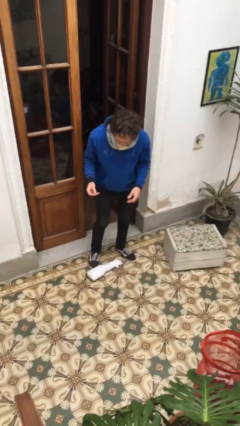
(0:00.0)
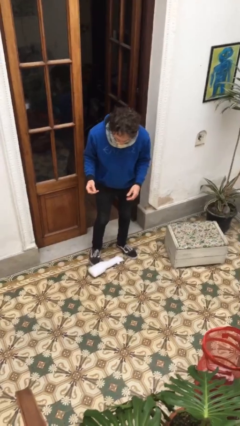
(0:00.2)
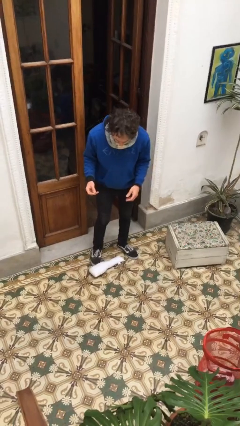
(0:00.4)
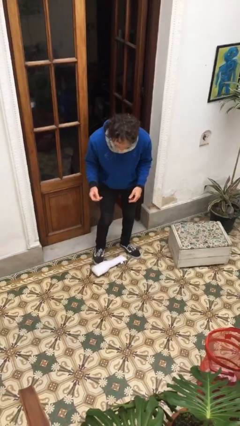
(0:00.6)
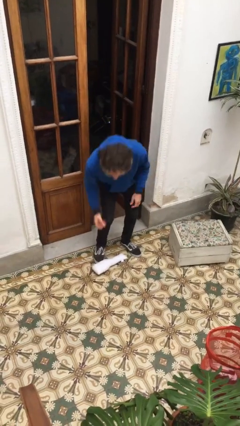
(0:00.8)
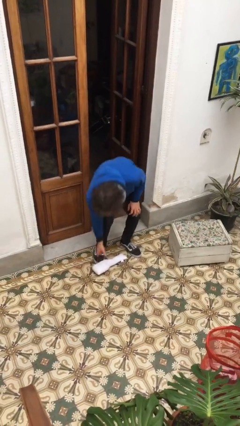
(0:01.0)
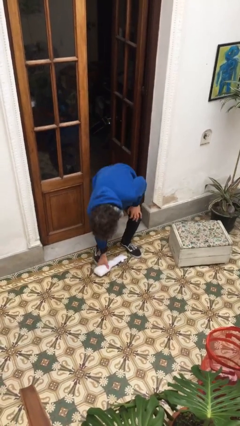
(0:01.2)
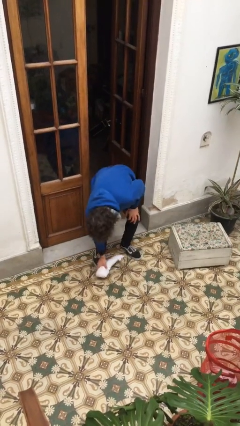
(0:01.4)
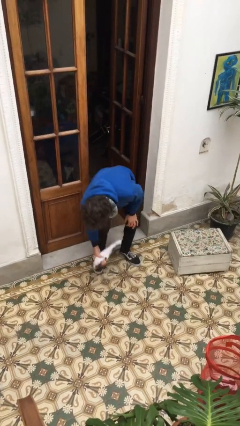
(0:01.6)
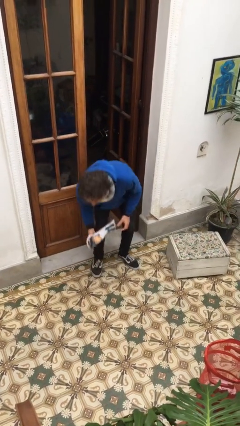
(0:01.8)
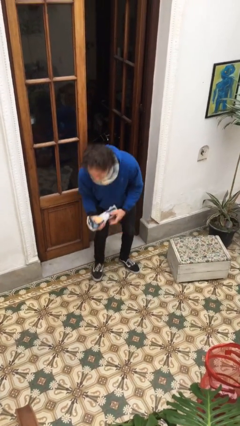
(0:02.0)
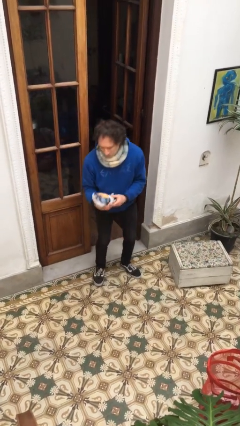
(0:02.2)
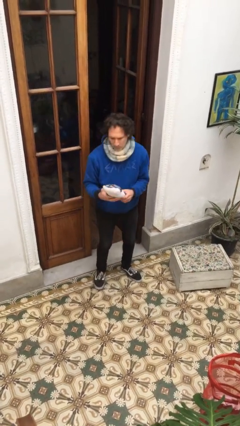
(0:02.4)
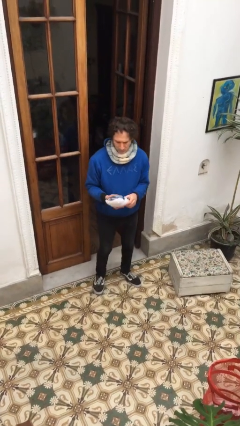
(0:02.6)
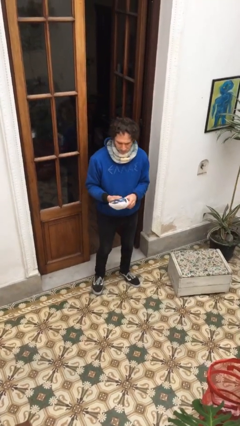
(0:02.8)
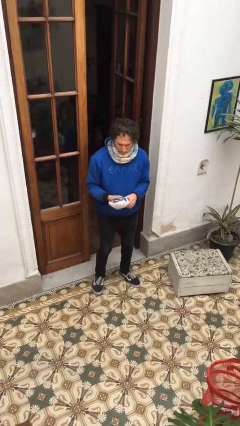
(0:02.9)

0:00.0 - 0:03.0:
person picks up object from floor

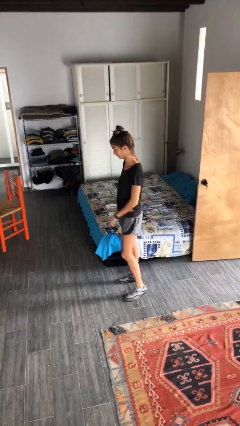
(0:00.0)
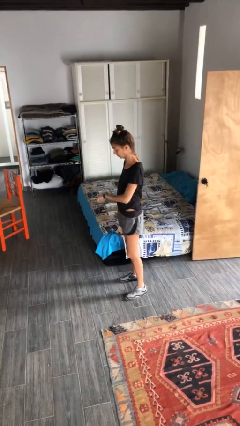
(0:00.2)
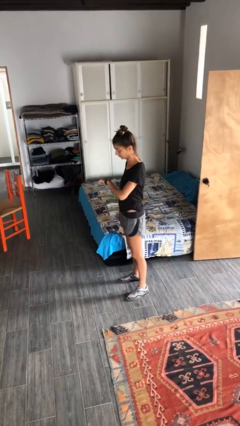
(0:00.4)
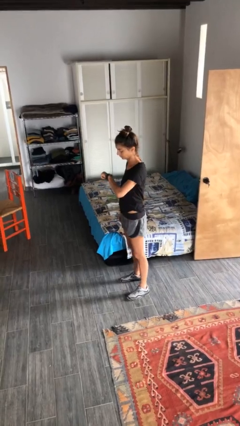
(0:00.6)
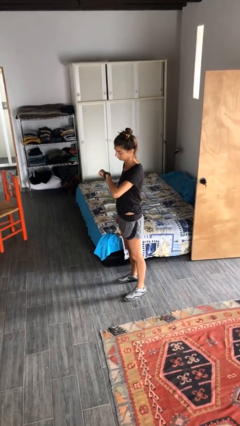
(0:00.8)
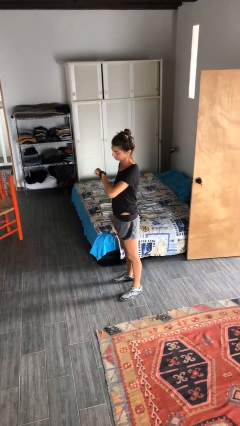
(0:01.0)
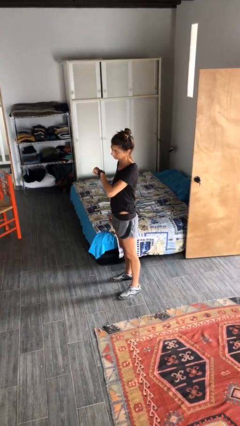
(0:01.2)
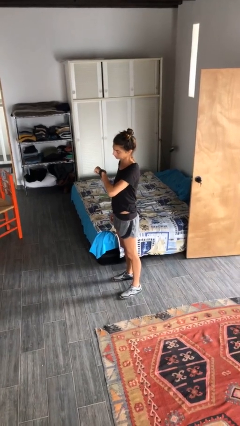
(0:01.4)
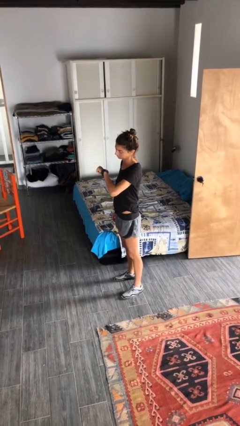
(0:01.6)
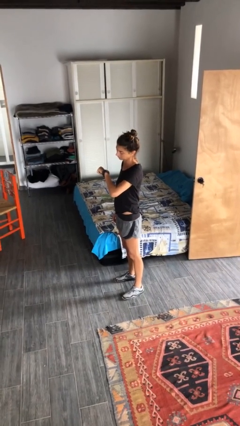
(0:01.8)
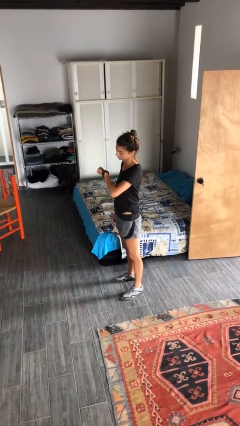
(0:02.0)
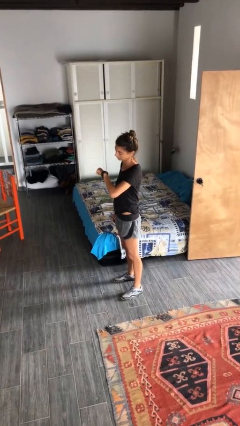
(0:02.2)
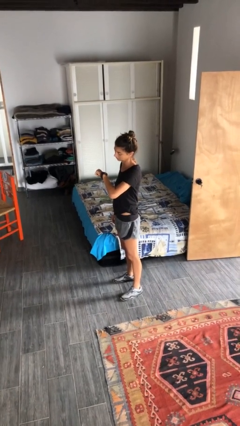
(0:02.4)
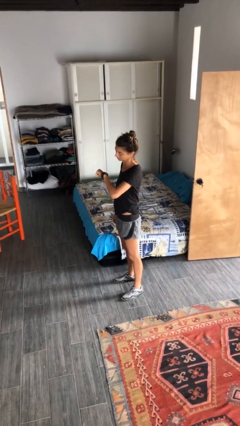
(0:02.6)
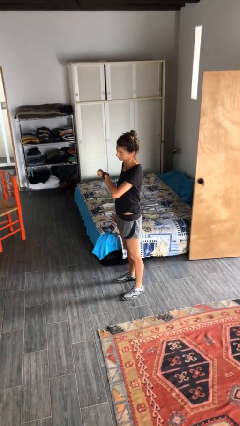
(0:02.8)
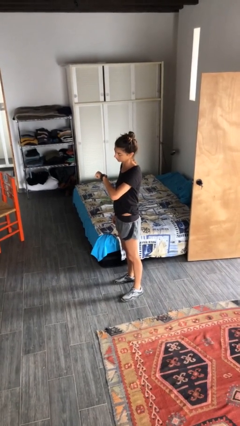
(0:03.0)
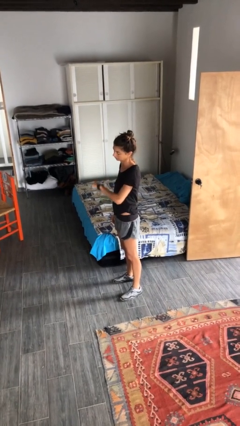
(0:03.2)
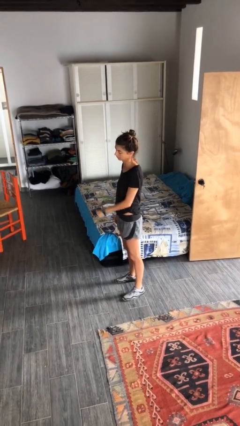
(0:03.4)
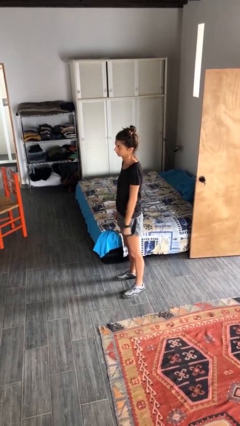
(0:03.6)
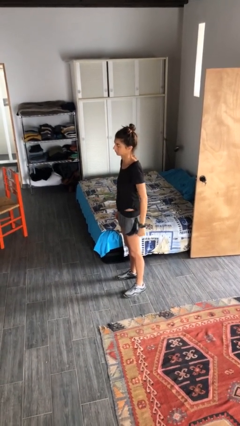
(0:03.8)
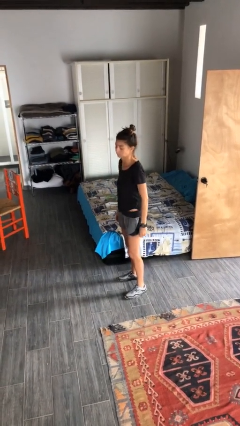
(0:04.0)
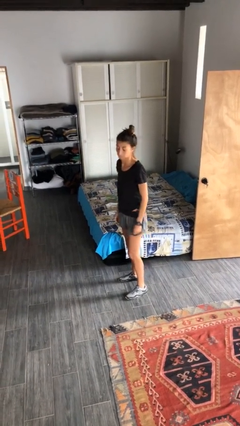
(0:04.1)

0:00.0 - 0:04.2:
person looks at wristwatch

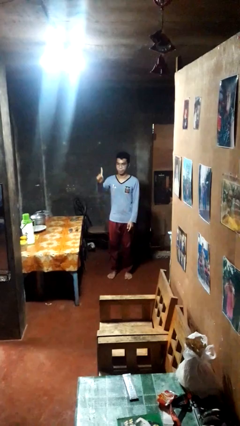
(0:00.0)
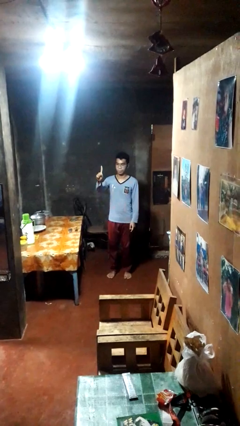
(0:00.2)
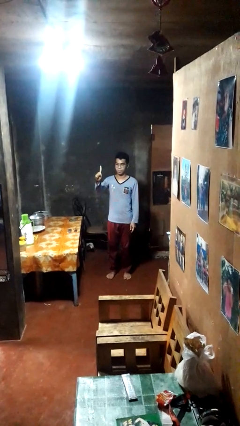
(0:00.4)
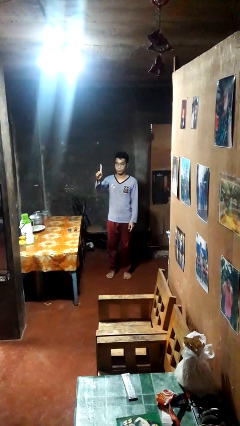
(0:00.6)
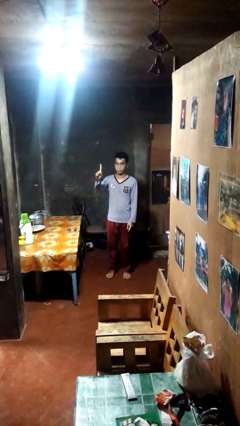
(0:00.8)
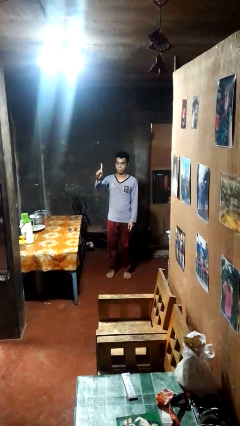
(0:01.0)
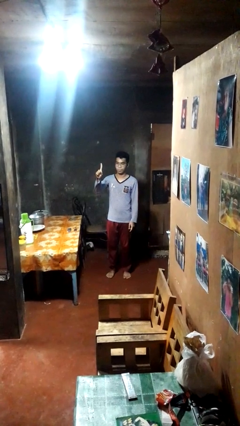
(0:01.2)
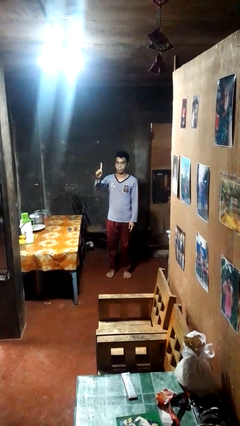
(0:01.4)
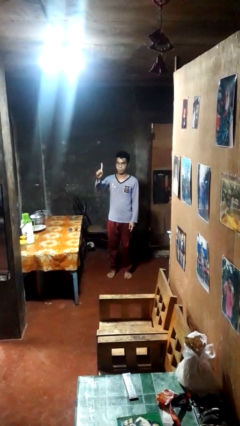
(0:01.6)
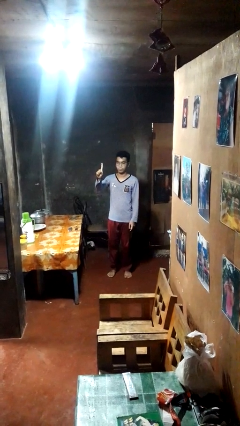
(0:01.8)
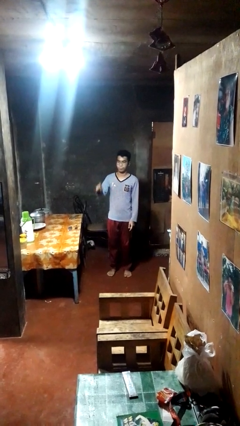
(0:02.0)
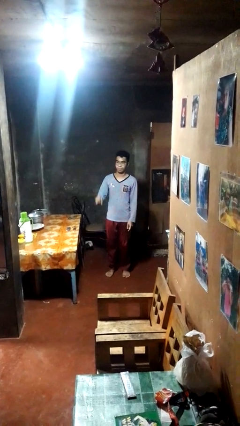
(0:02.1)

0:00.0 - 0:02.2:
person gestures number one

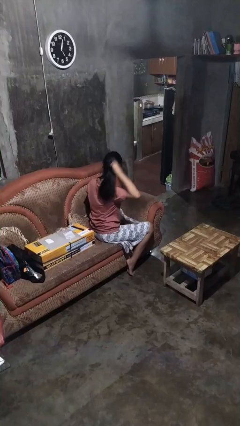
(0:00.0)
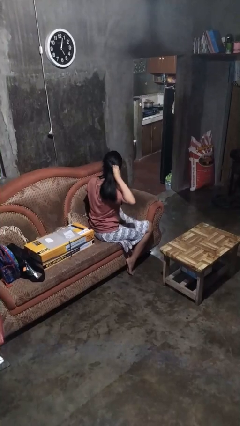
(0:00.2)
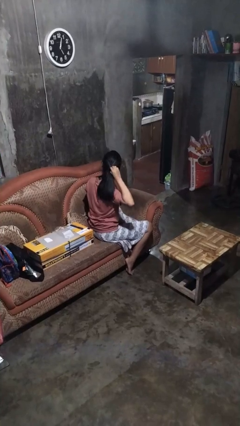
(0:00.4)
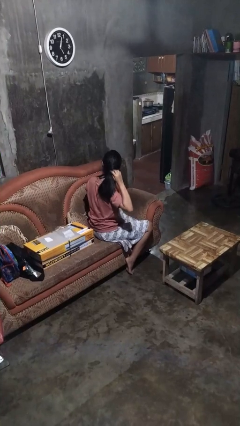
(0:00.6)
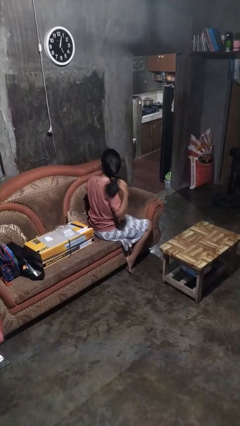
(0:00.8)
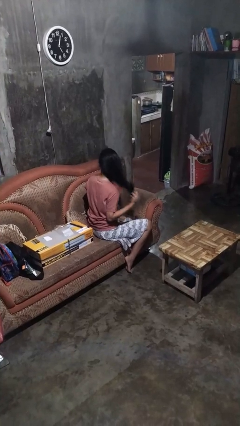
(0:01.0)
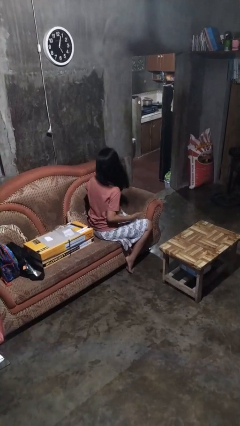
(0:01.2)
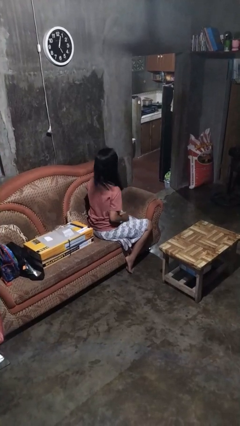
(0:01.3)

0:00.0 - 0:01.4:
person takes off hairtie

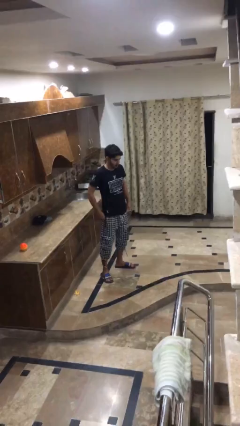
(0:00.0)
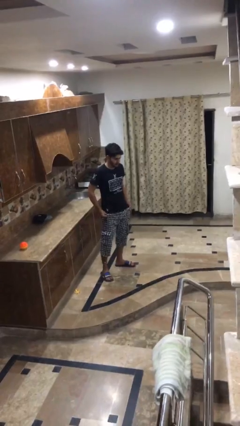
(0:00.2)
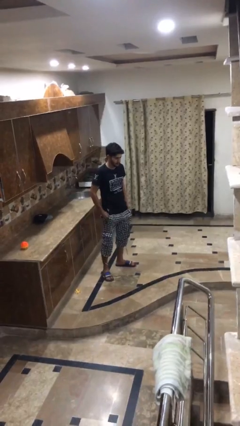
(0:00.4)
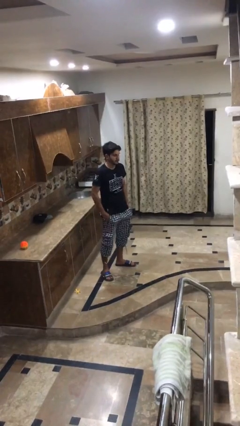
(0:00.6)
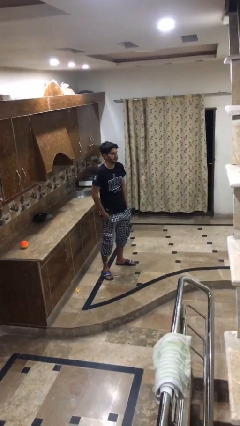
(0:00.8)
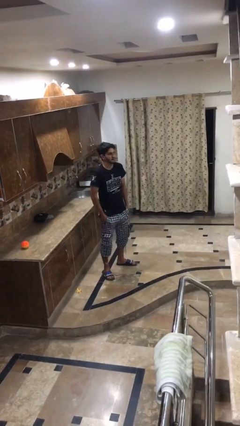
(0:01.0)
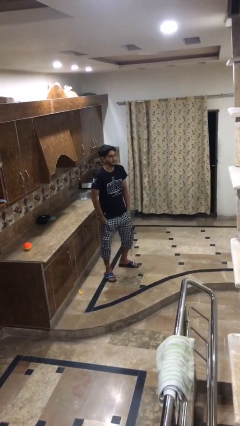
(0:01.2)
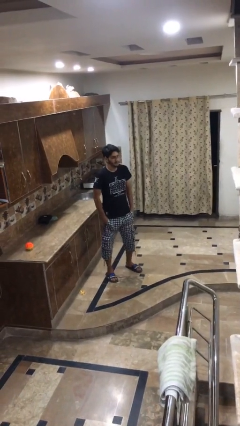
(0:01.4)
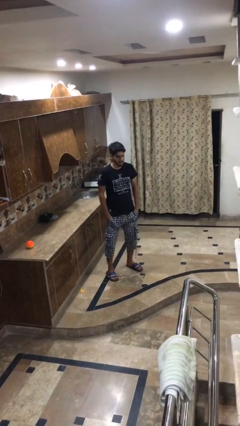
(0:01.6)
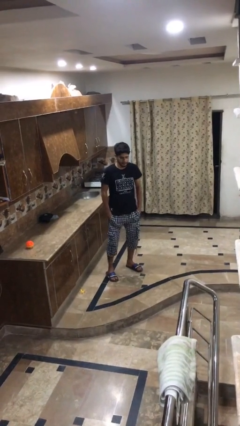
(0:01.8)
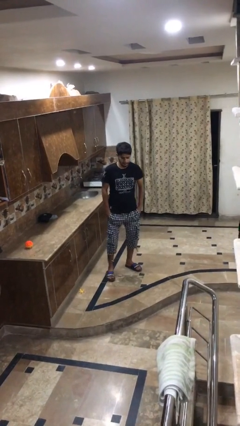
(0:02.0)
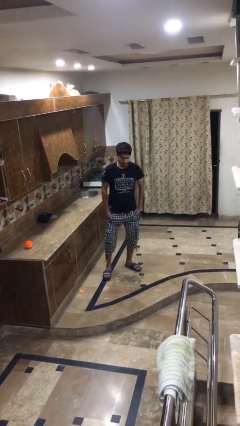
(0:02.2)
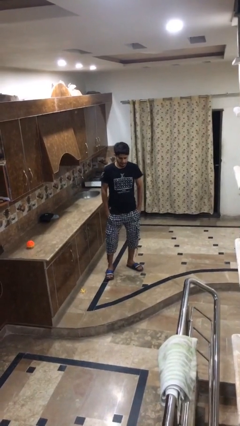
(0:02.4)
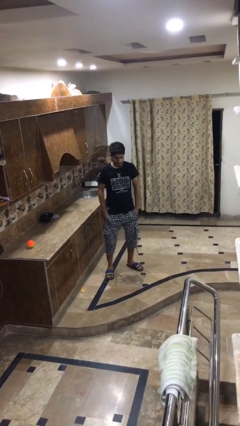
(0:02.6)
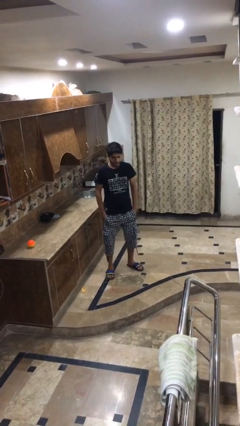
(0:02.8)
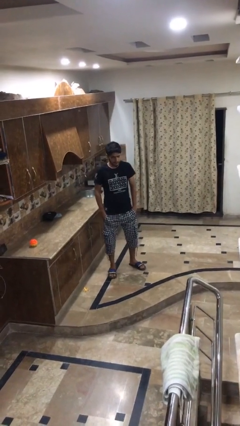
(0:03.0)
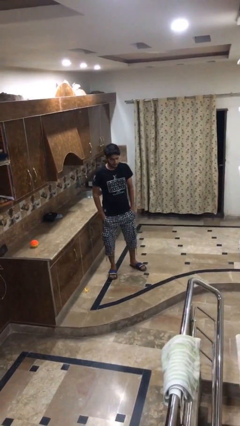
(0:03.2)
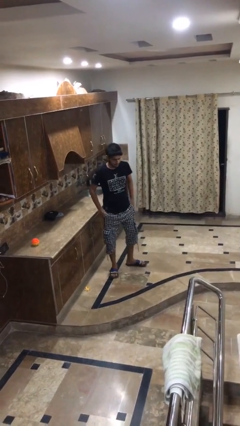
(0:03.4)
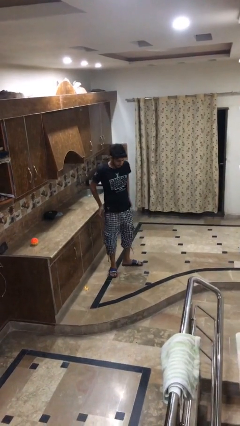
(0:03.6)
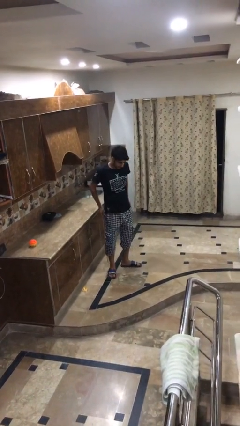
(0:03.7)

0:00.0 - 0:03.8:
person puts hands in back pockets

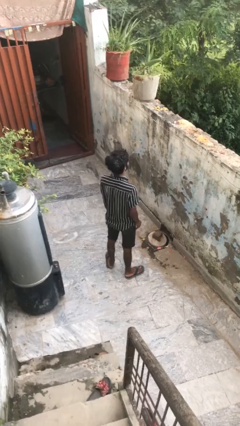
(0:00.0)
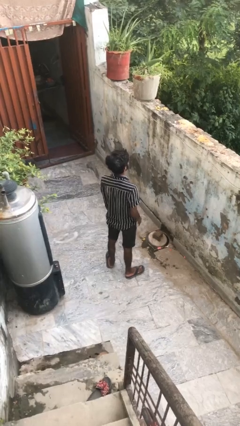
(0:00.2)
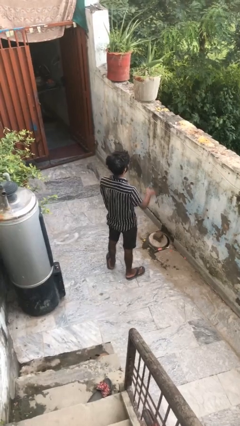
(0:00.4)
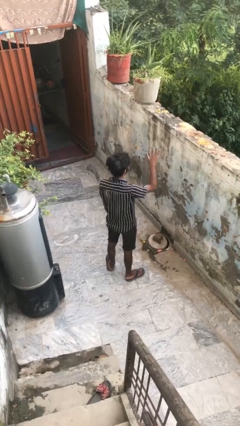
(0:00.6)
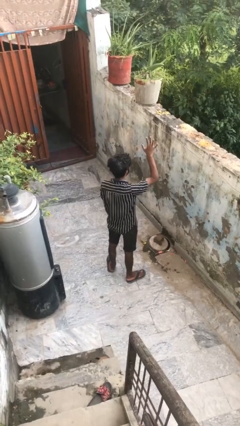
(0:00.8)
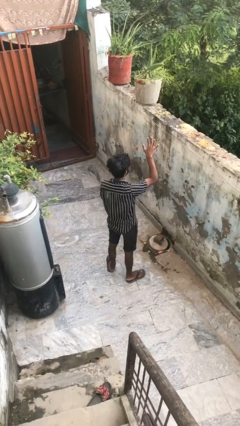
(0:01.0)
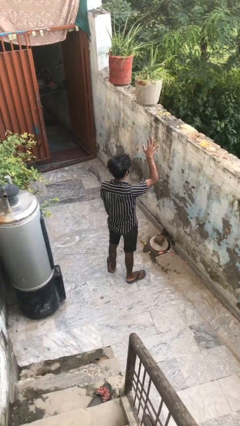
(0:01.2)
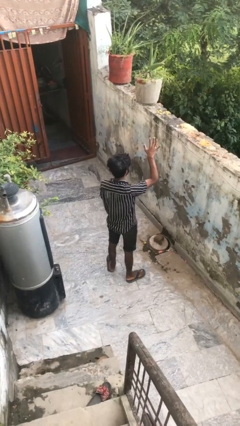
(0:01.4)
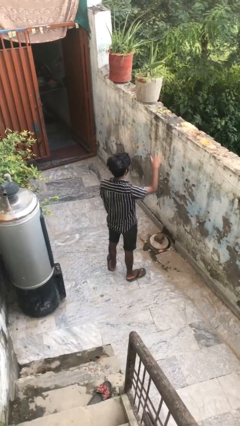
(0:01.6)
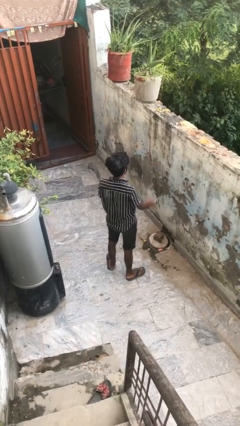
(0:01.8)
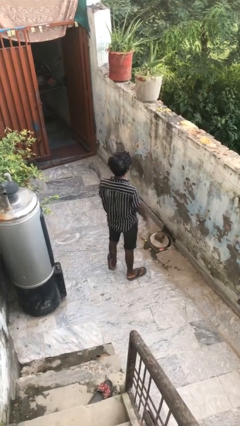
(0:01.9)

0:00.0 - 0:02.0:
person gestures number five

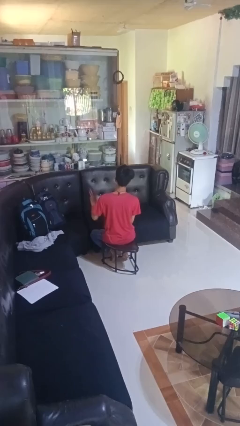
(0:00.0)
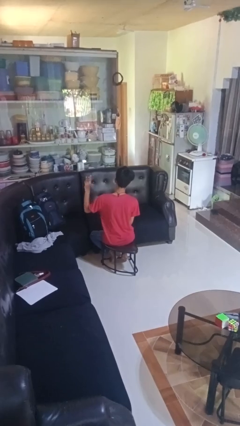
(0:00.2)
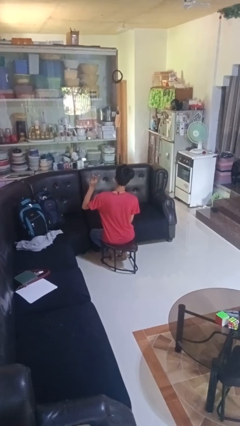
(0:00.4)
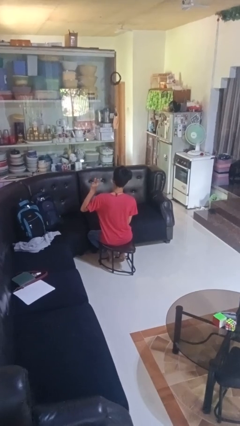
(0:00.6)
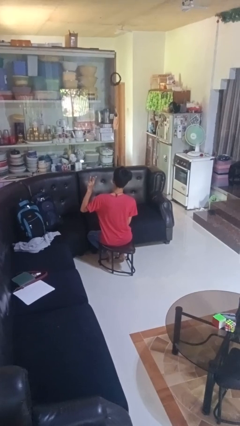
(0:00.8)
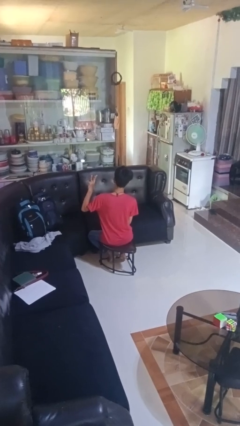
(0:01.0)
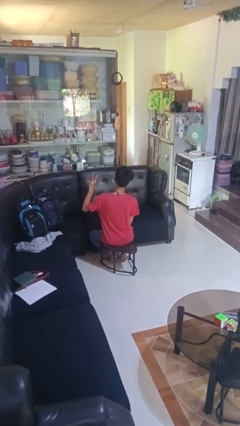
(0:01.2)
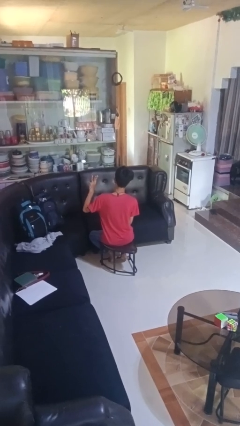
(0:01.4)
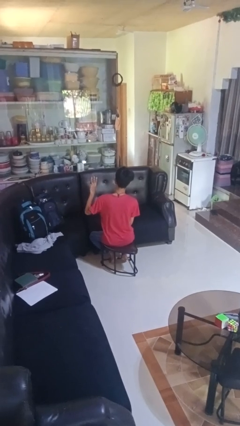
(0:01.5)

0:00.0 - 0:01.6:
person gestures number three
